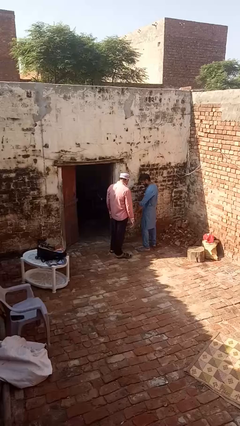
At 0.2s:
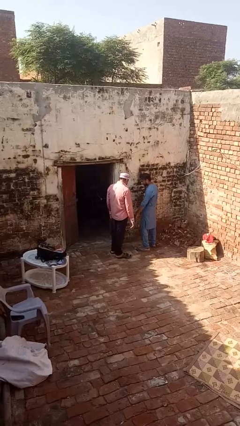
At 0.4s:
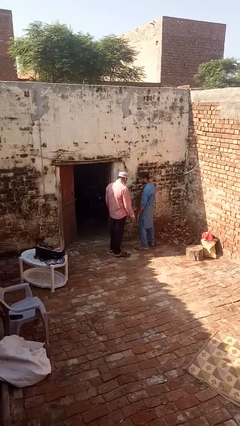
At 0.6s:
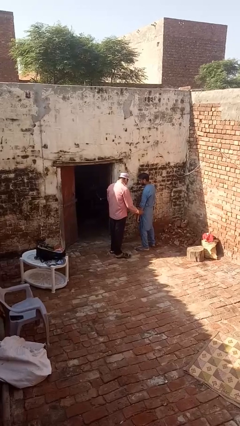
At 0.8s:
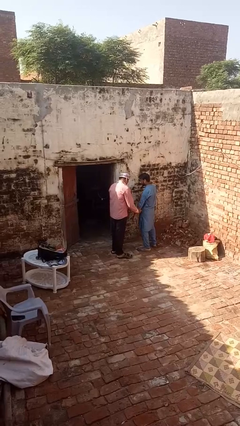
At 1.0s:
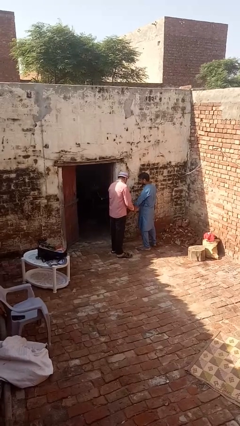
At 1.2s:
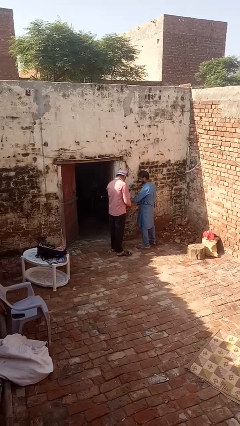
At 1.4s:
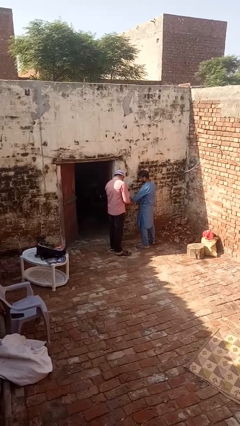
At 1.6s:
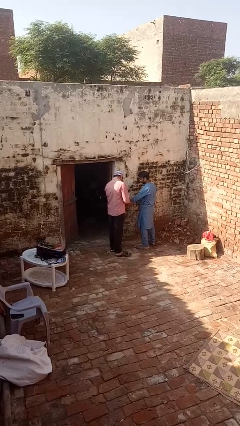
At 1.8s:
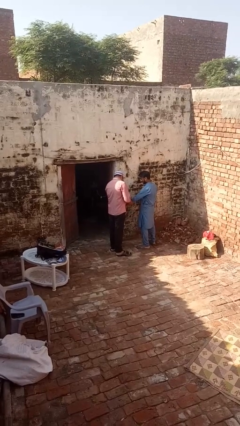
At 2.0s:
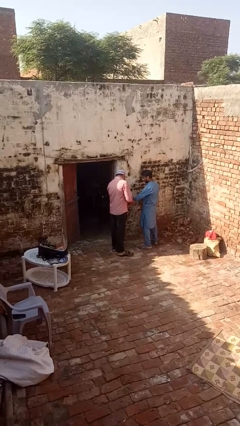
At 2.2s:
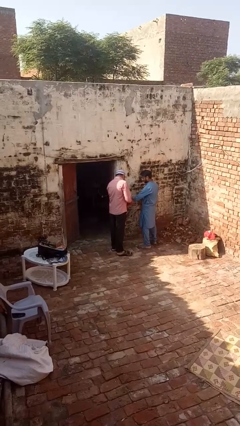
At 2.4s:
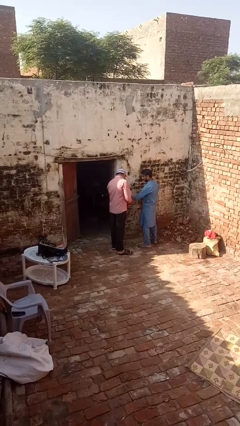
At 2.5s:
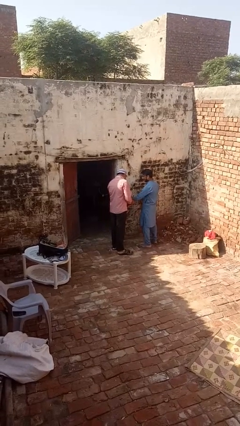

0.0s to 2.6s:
person grabs person by forearm

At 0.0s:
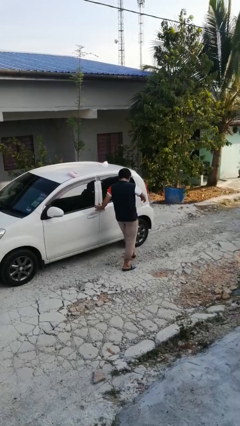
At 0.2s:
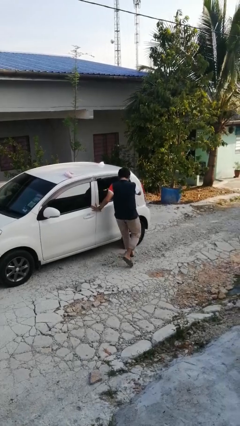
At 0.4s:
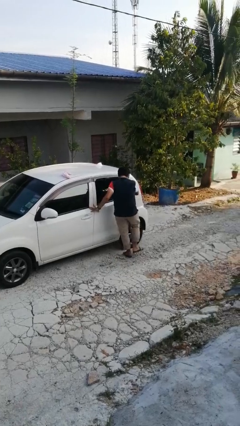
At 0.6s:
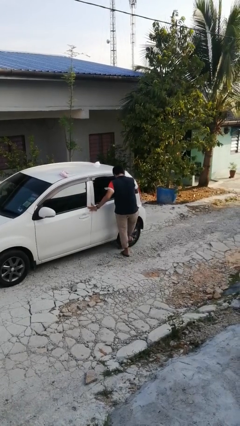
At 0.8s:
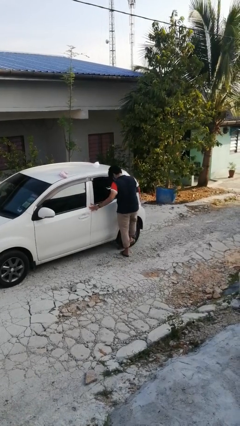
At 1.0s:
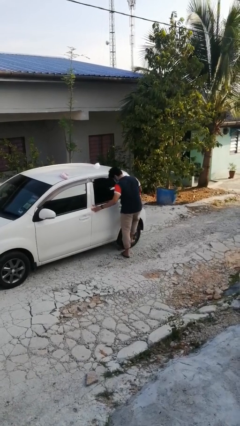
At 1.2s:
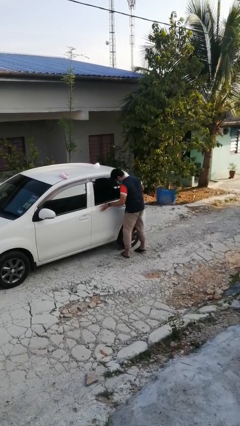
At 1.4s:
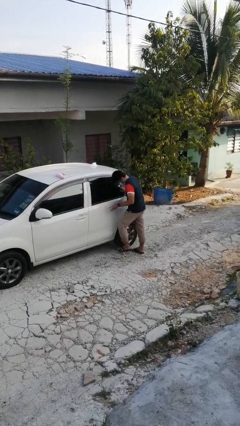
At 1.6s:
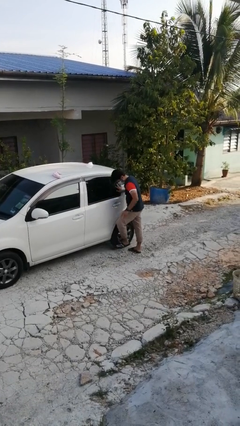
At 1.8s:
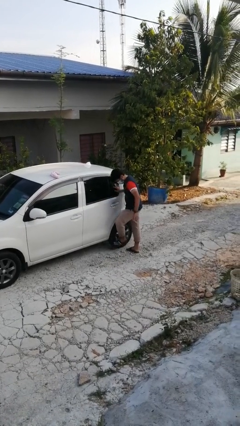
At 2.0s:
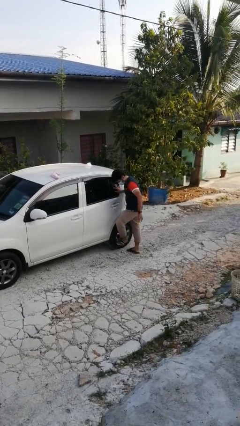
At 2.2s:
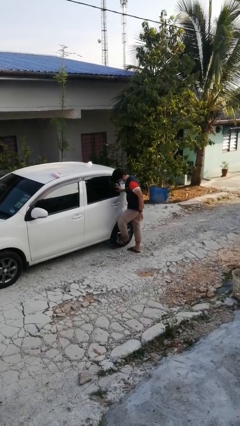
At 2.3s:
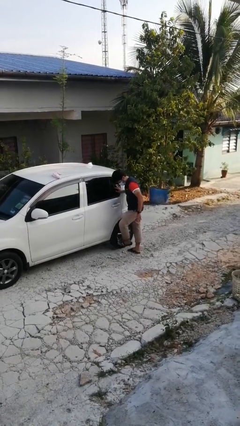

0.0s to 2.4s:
person kicks car tires

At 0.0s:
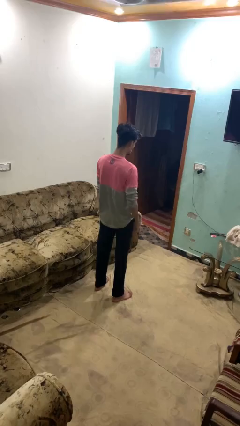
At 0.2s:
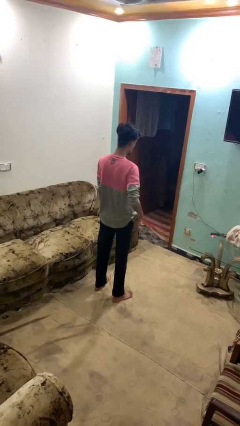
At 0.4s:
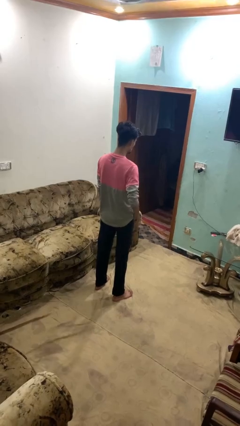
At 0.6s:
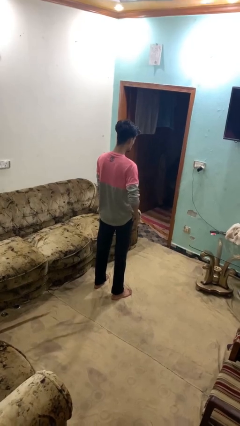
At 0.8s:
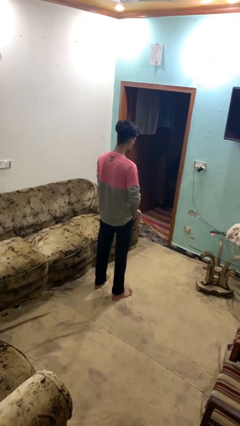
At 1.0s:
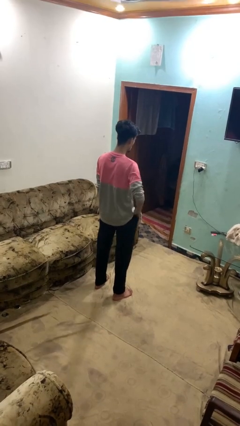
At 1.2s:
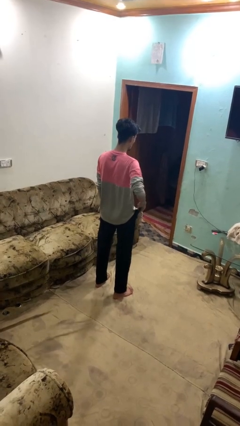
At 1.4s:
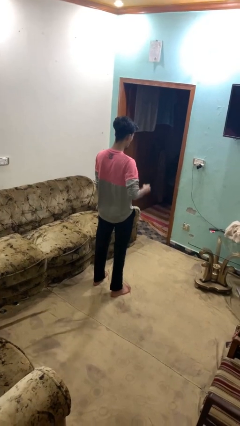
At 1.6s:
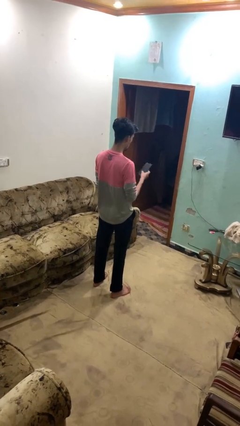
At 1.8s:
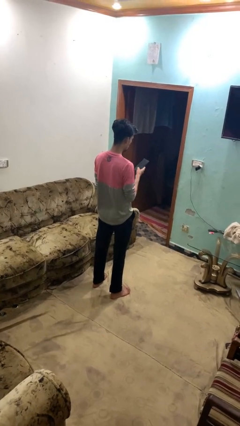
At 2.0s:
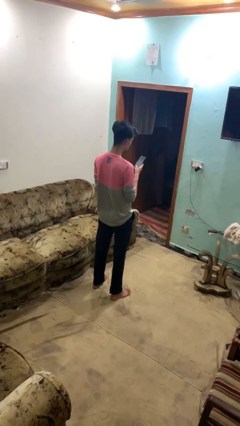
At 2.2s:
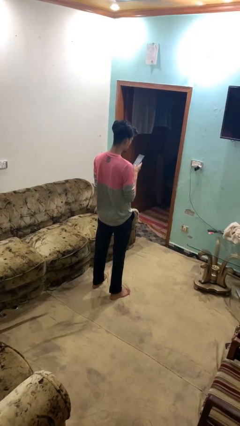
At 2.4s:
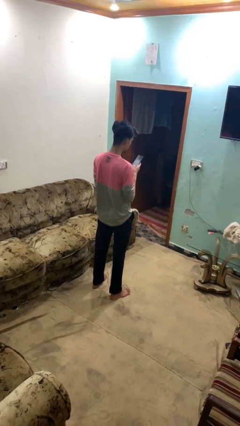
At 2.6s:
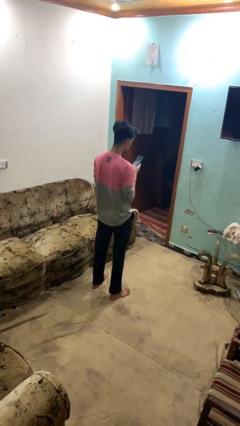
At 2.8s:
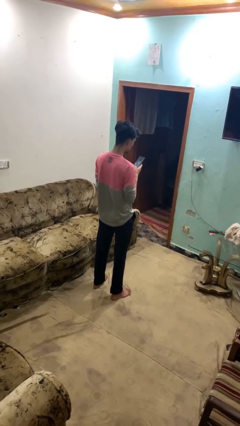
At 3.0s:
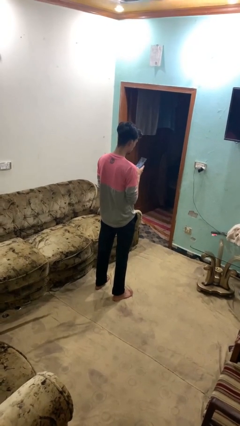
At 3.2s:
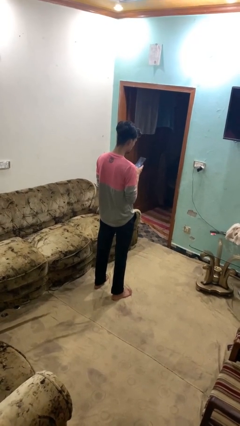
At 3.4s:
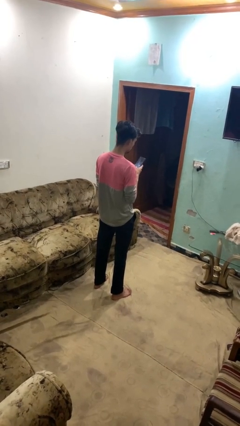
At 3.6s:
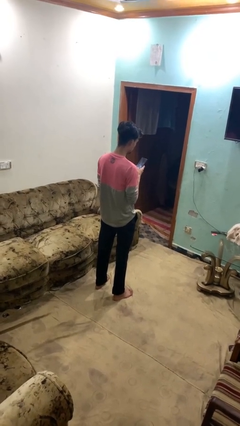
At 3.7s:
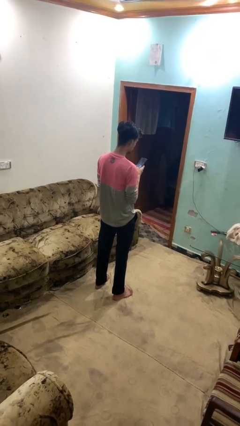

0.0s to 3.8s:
person takes phone from pocket

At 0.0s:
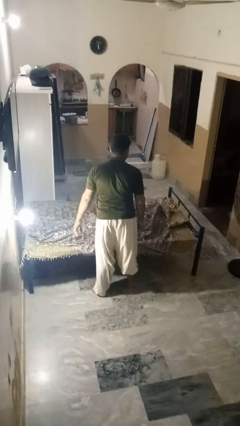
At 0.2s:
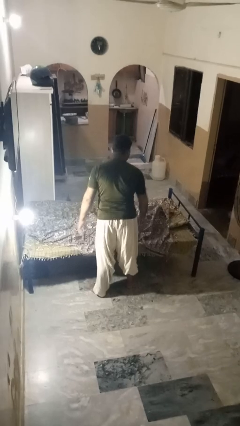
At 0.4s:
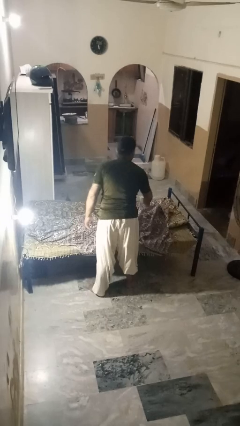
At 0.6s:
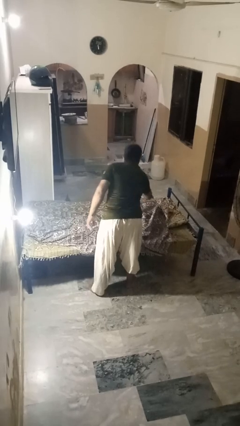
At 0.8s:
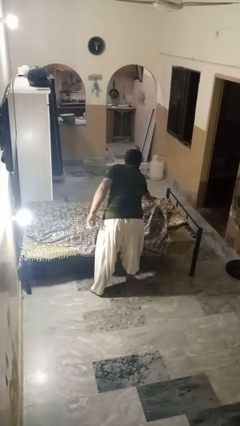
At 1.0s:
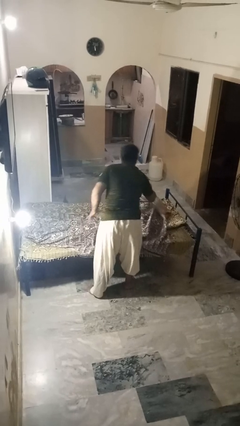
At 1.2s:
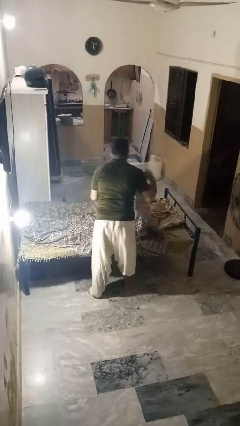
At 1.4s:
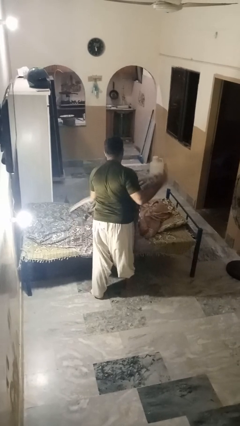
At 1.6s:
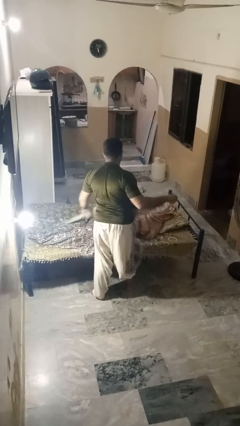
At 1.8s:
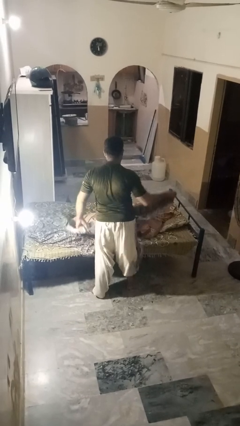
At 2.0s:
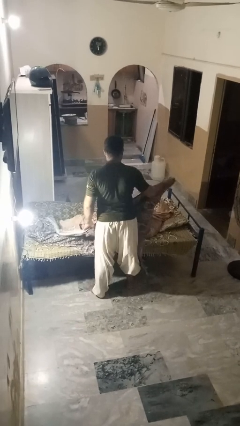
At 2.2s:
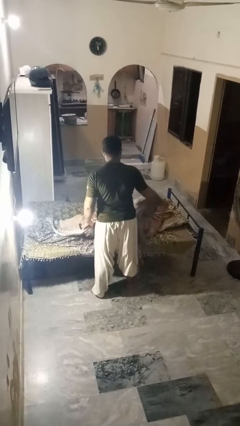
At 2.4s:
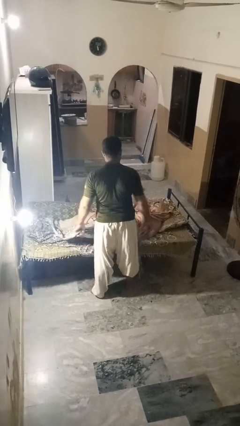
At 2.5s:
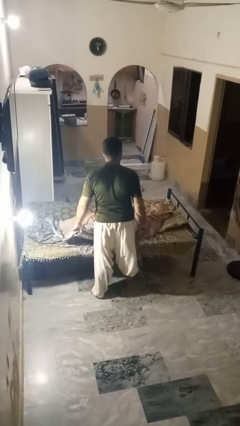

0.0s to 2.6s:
person uncovers friend with blanket

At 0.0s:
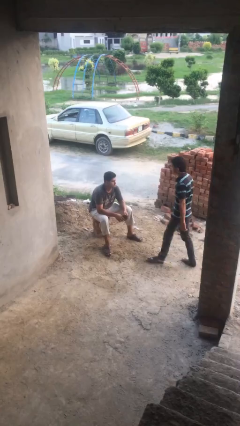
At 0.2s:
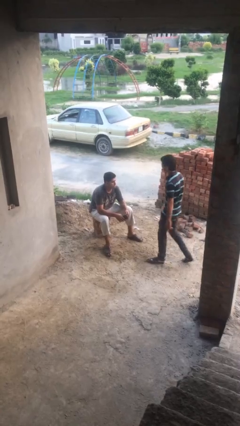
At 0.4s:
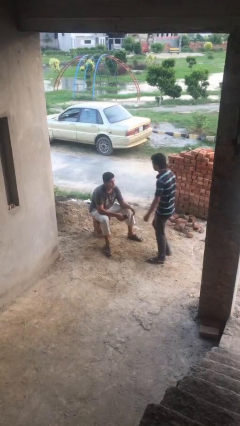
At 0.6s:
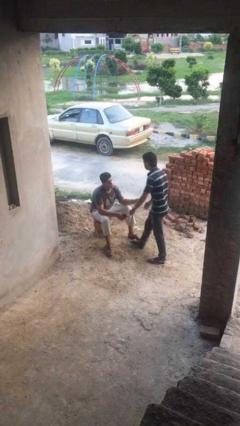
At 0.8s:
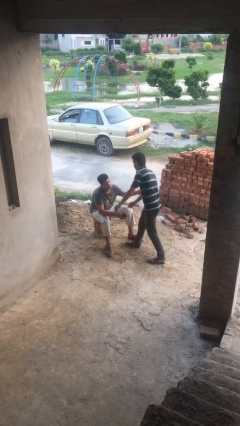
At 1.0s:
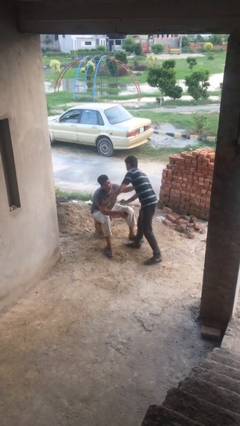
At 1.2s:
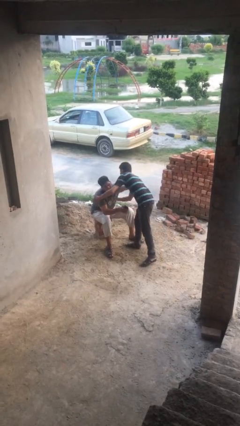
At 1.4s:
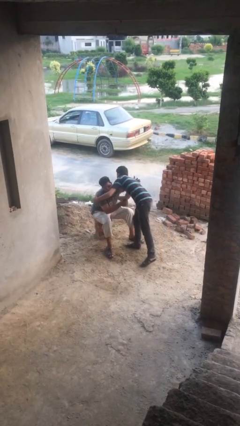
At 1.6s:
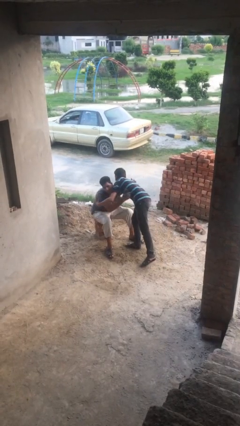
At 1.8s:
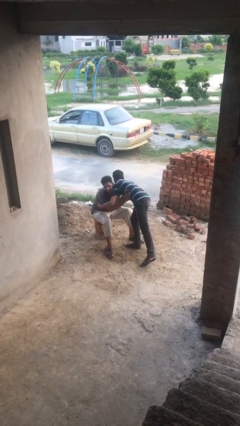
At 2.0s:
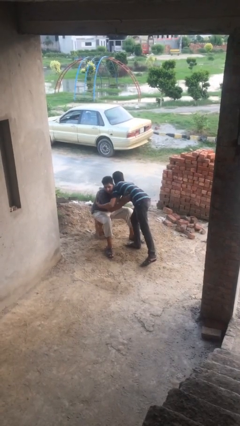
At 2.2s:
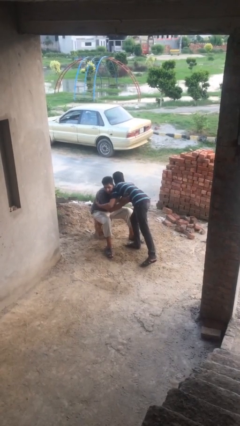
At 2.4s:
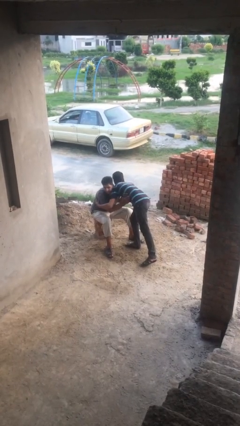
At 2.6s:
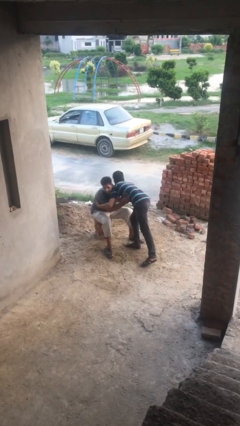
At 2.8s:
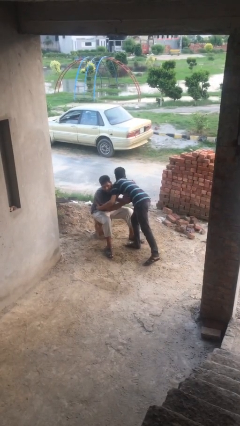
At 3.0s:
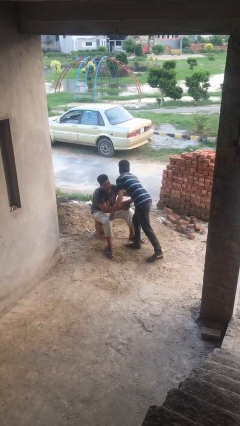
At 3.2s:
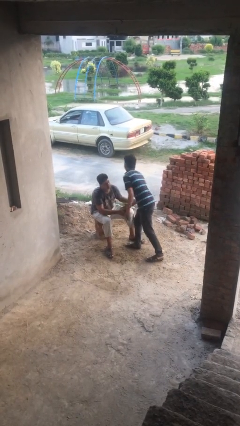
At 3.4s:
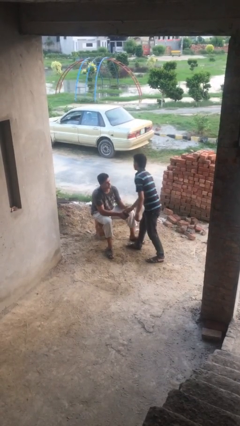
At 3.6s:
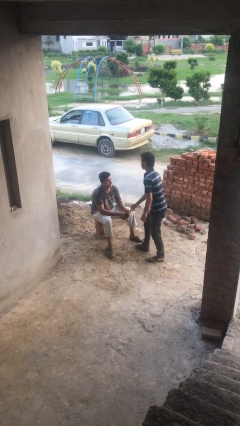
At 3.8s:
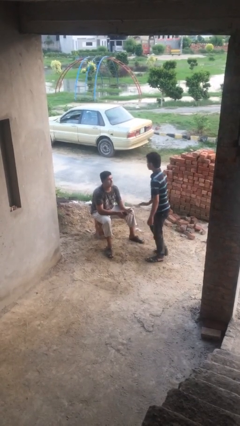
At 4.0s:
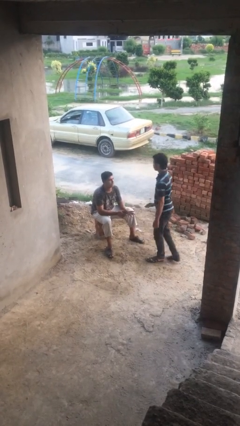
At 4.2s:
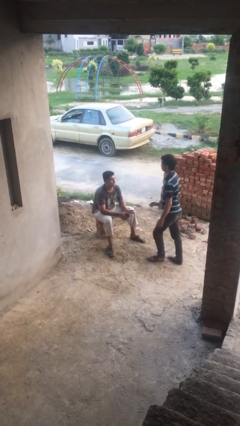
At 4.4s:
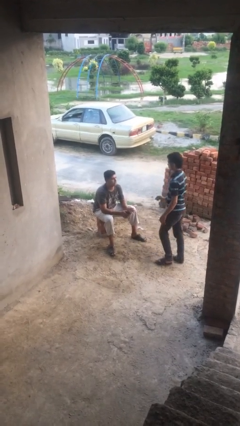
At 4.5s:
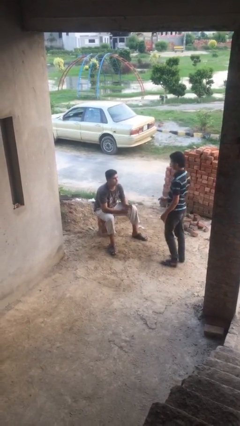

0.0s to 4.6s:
person embraces person

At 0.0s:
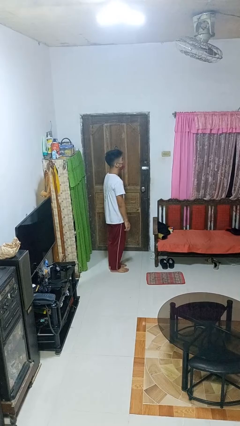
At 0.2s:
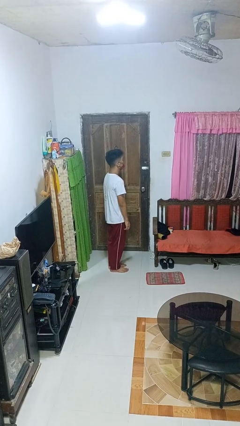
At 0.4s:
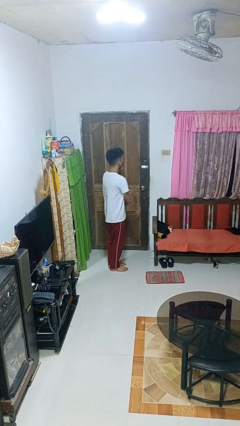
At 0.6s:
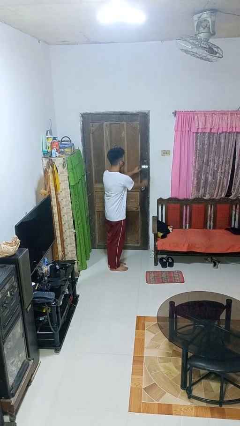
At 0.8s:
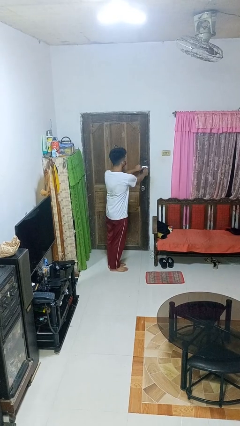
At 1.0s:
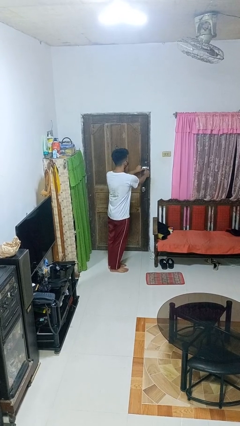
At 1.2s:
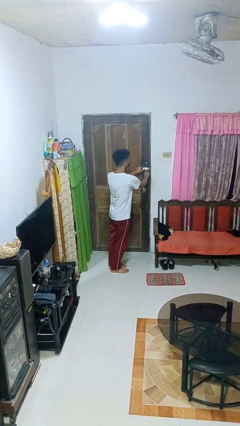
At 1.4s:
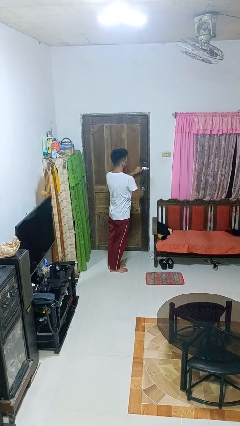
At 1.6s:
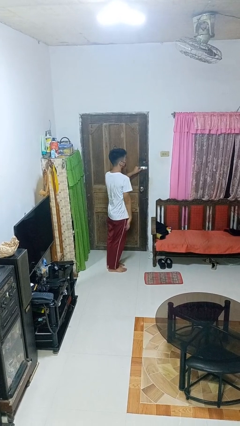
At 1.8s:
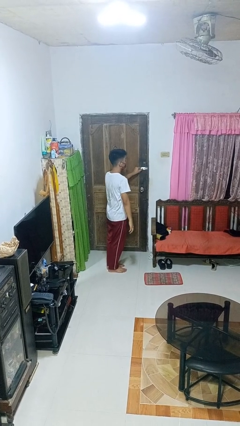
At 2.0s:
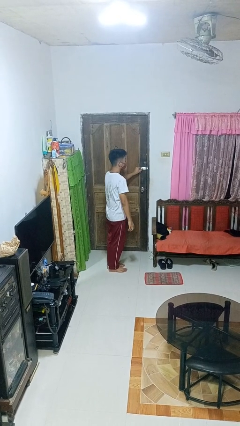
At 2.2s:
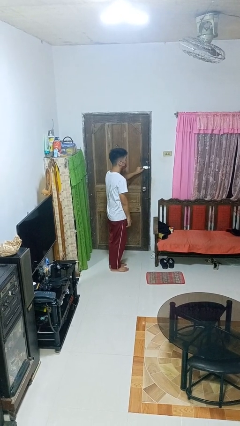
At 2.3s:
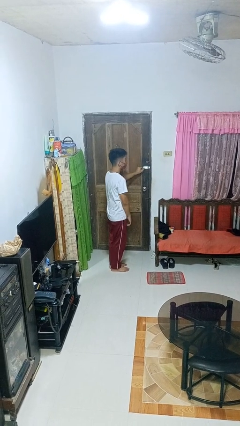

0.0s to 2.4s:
person unlocks door with keys
